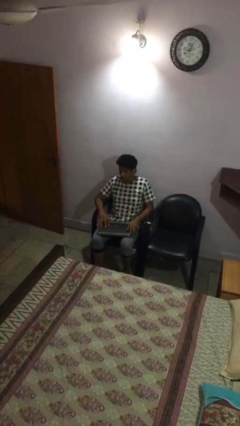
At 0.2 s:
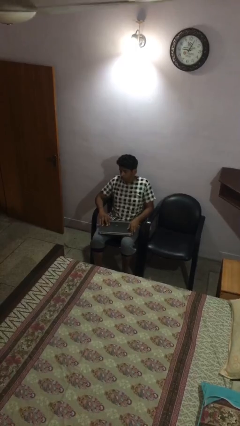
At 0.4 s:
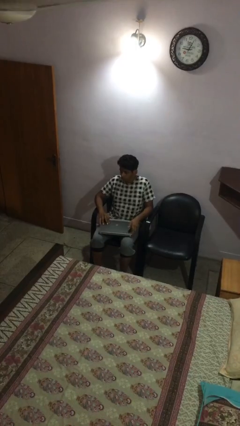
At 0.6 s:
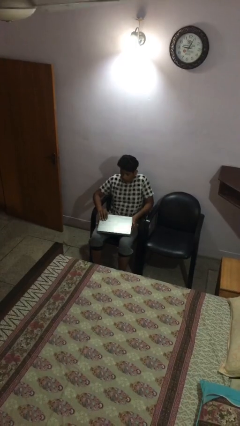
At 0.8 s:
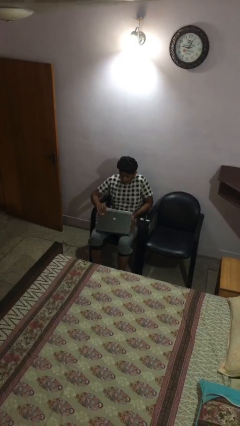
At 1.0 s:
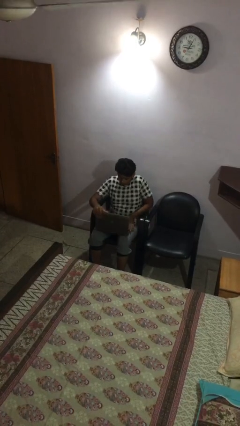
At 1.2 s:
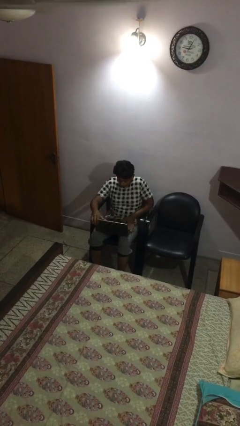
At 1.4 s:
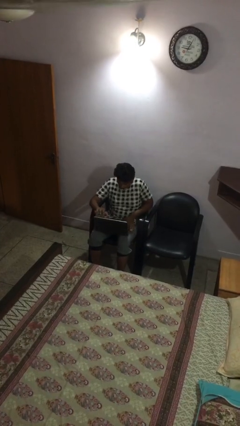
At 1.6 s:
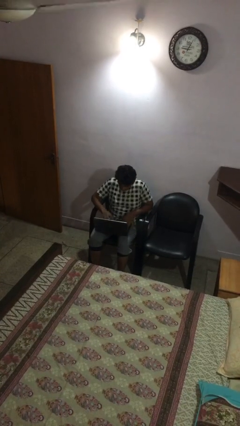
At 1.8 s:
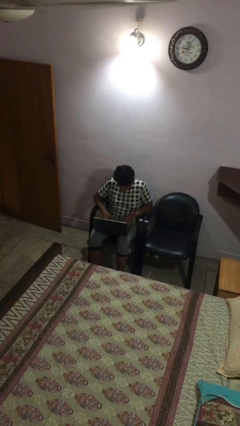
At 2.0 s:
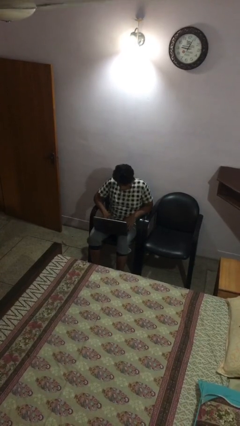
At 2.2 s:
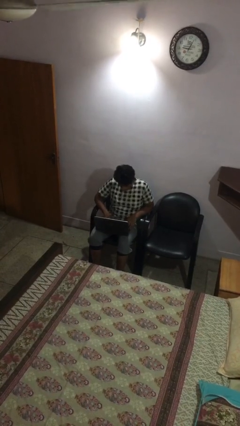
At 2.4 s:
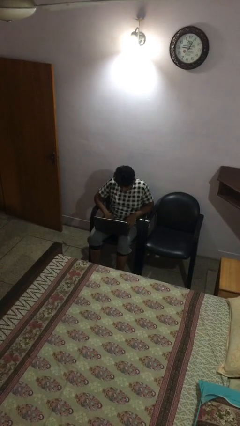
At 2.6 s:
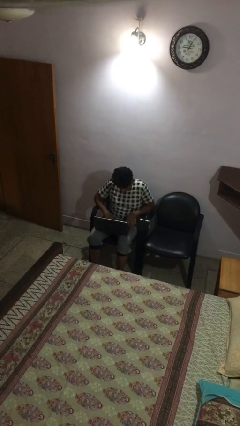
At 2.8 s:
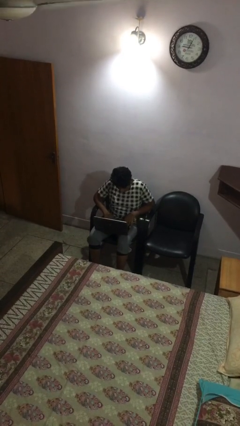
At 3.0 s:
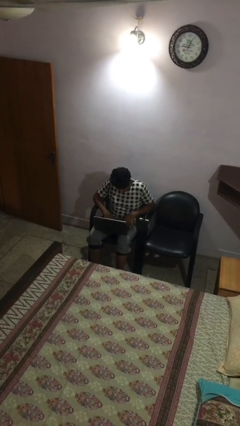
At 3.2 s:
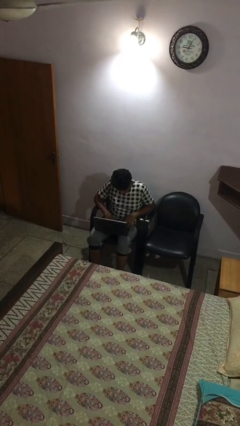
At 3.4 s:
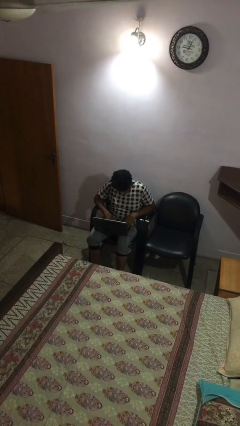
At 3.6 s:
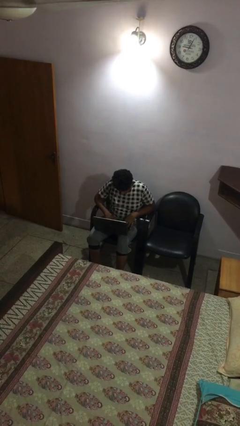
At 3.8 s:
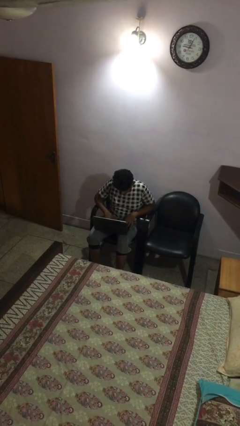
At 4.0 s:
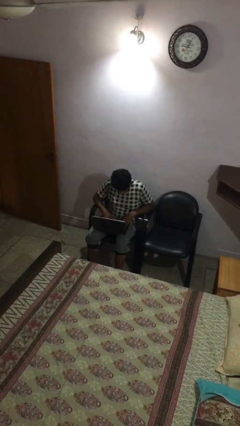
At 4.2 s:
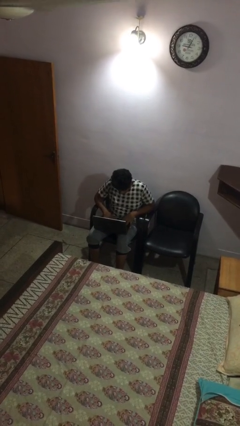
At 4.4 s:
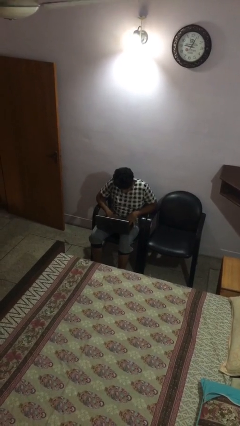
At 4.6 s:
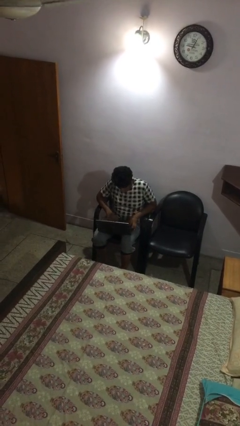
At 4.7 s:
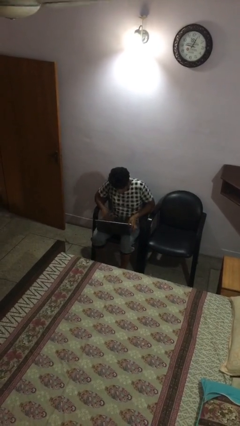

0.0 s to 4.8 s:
person interacts with laptop

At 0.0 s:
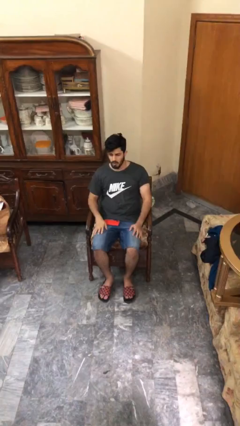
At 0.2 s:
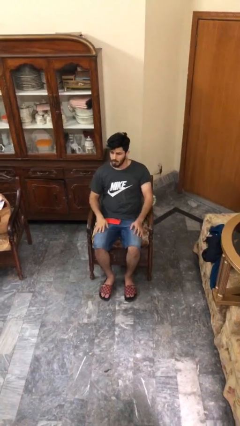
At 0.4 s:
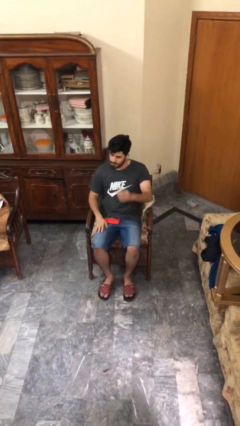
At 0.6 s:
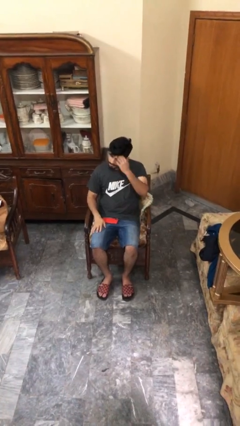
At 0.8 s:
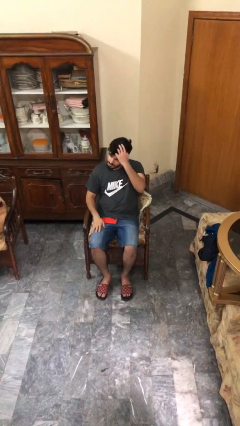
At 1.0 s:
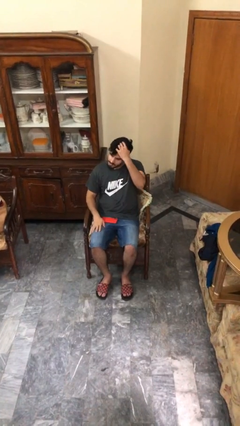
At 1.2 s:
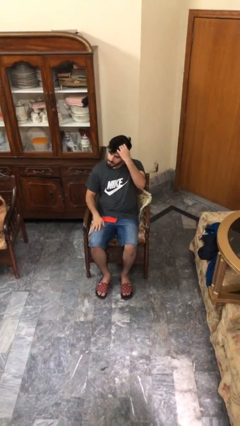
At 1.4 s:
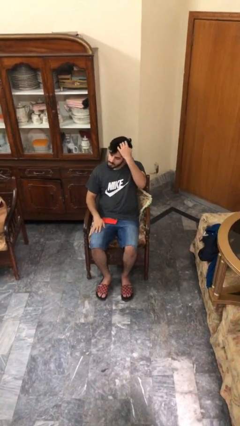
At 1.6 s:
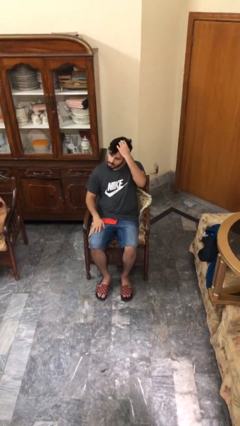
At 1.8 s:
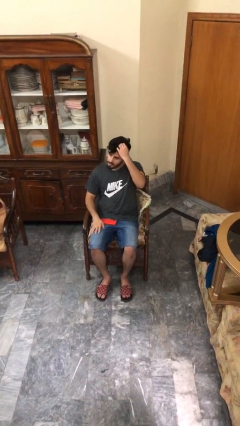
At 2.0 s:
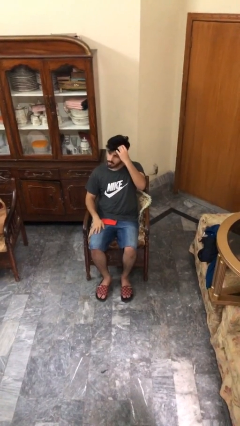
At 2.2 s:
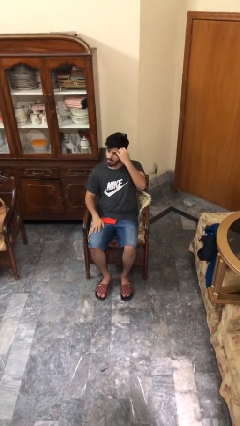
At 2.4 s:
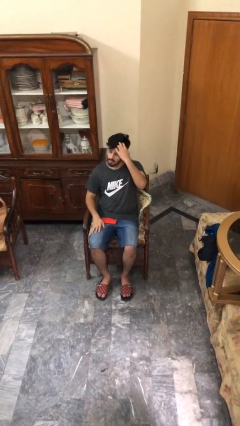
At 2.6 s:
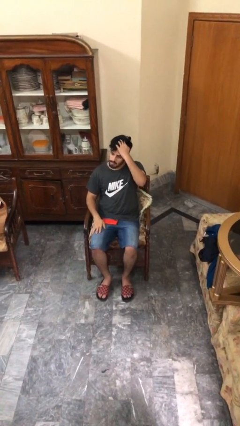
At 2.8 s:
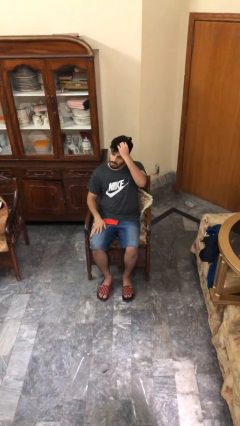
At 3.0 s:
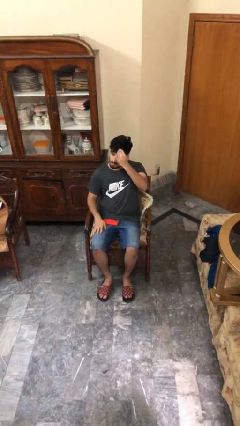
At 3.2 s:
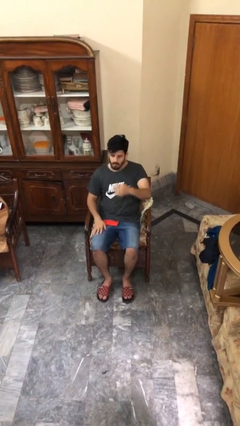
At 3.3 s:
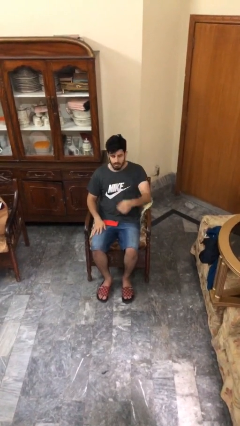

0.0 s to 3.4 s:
person strokes hair

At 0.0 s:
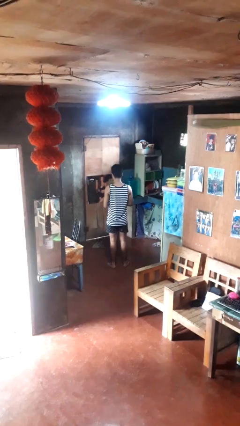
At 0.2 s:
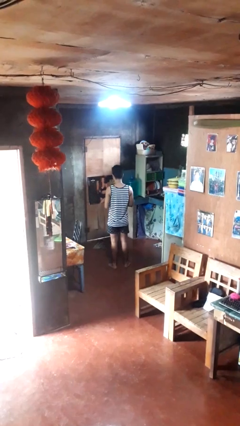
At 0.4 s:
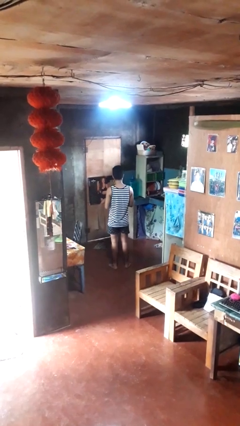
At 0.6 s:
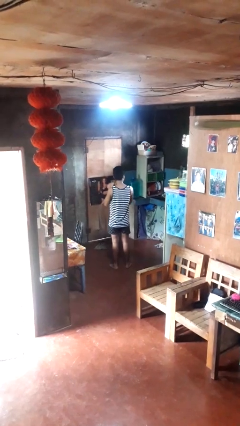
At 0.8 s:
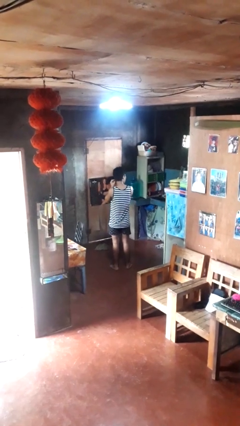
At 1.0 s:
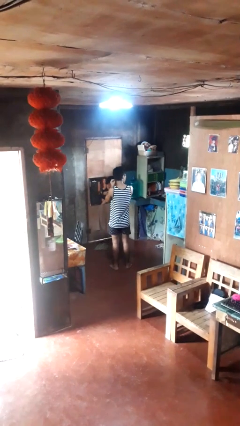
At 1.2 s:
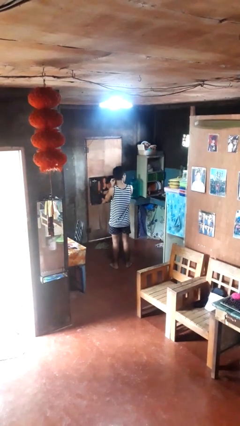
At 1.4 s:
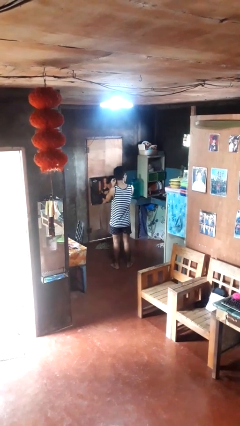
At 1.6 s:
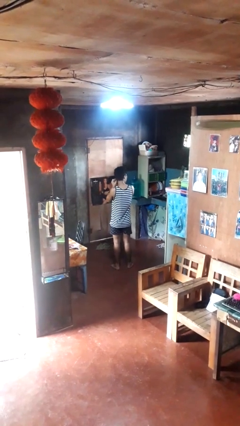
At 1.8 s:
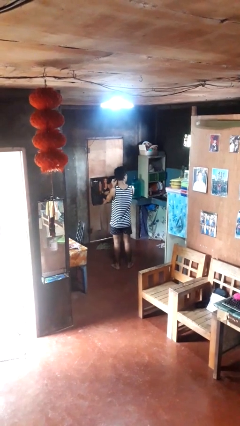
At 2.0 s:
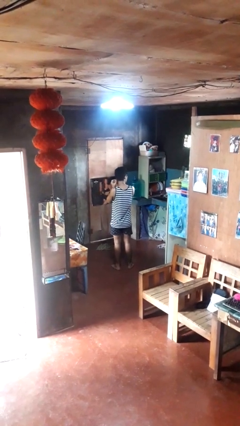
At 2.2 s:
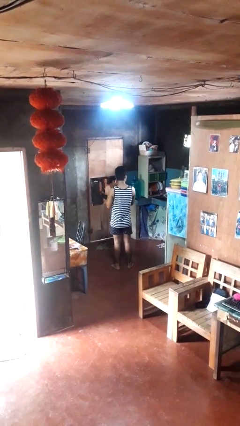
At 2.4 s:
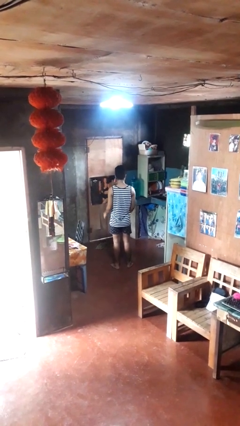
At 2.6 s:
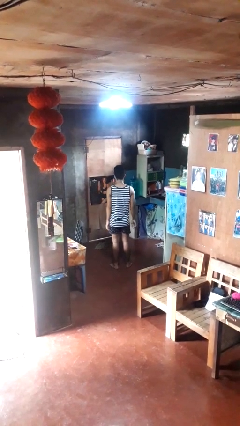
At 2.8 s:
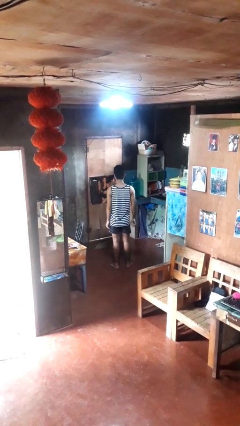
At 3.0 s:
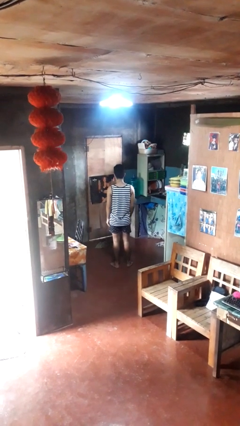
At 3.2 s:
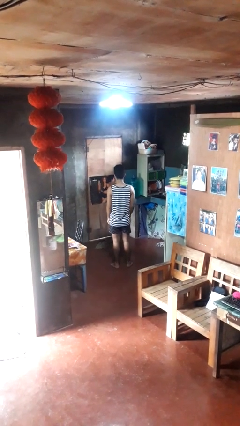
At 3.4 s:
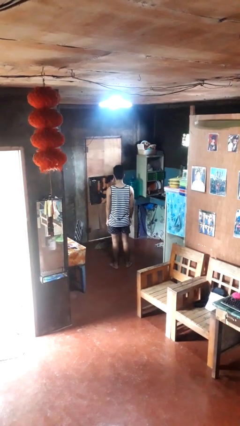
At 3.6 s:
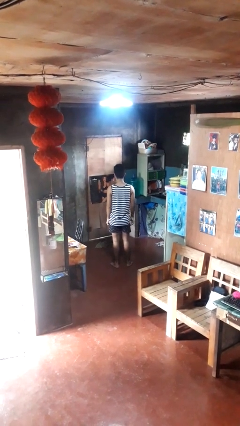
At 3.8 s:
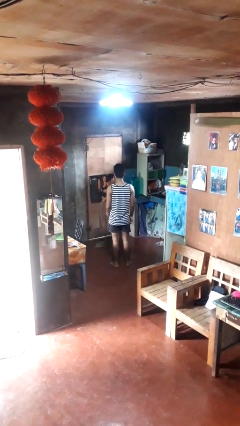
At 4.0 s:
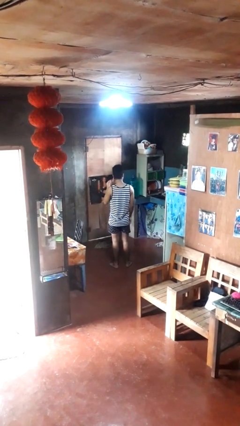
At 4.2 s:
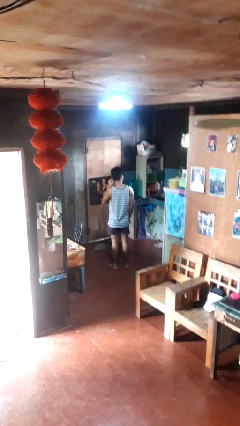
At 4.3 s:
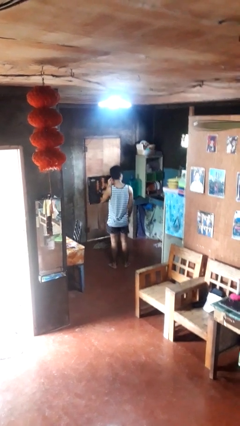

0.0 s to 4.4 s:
person puts on earrings

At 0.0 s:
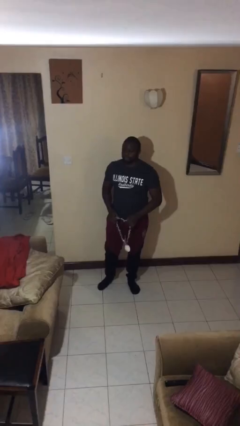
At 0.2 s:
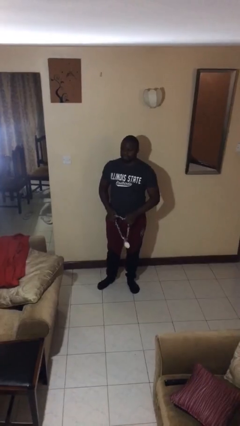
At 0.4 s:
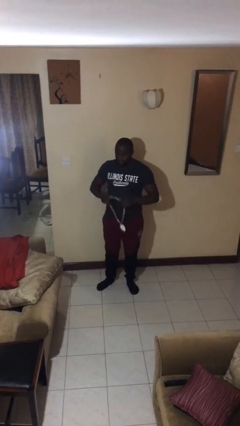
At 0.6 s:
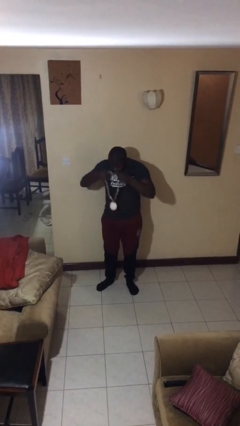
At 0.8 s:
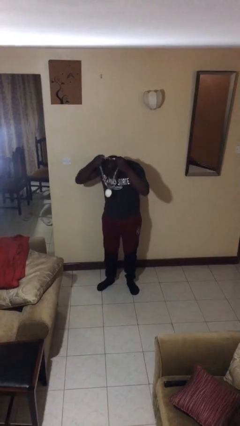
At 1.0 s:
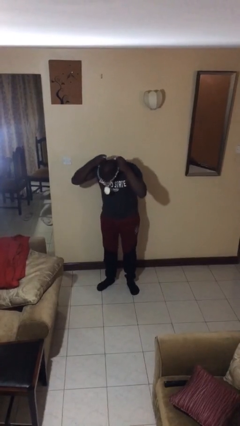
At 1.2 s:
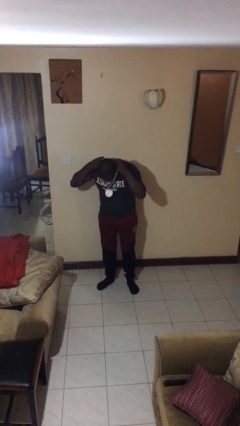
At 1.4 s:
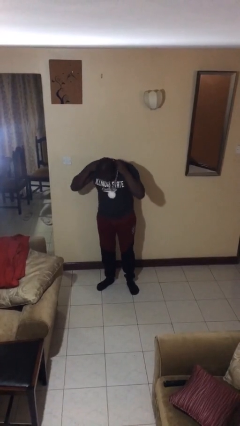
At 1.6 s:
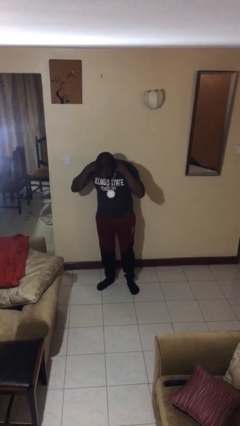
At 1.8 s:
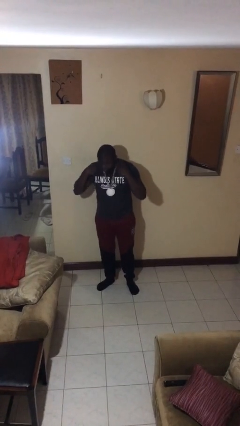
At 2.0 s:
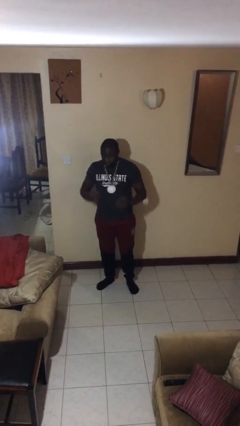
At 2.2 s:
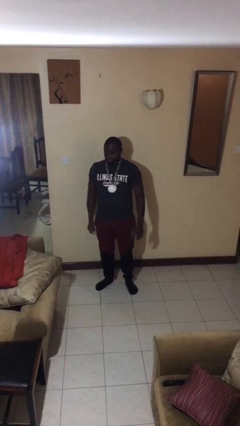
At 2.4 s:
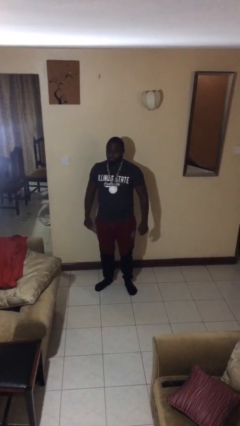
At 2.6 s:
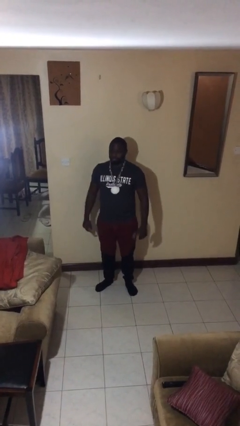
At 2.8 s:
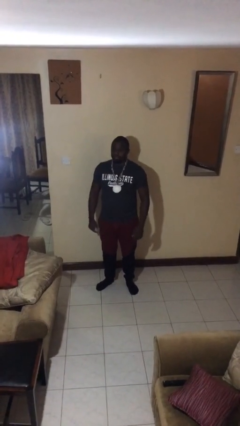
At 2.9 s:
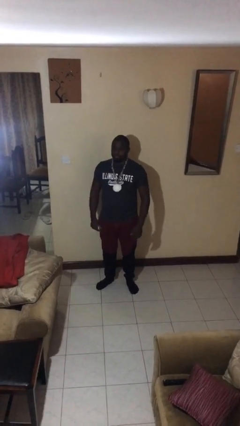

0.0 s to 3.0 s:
person puts on necklace

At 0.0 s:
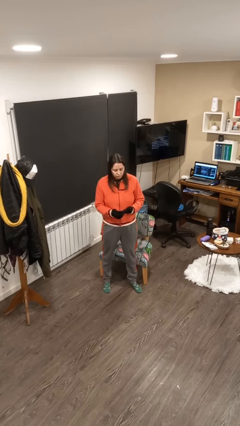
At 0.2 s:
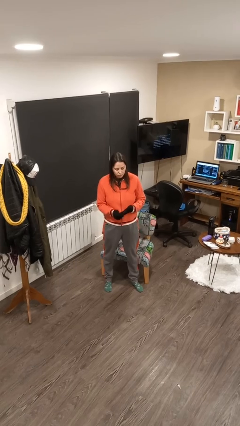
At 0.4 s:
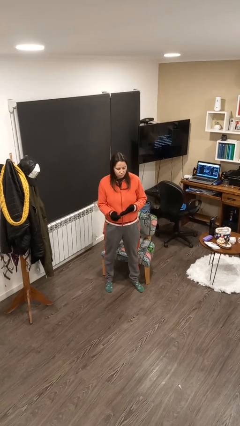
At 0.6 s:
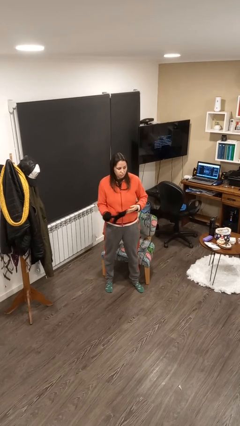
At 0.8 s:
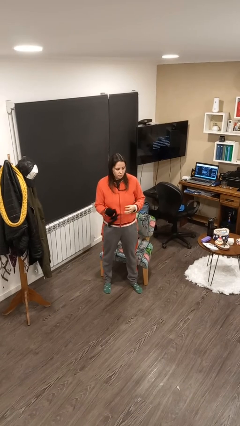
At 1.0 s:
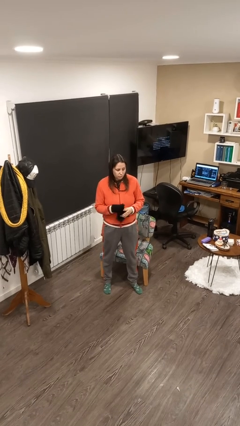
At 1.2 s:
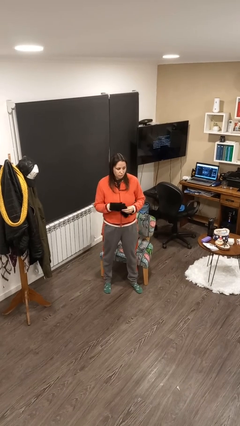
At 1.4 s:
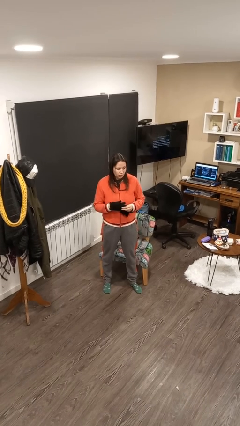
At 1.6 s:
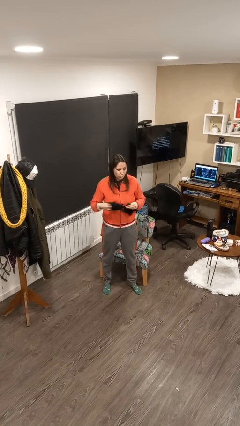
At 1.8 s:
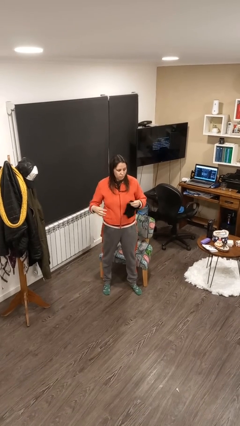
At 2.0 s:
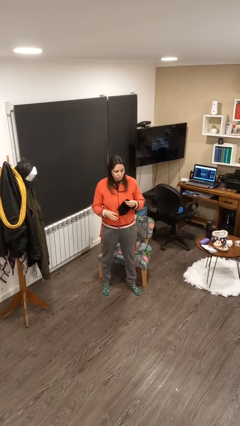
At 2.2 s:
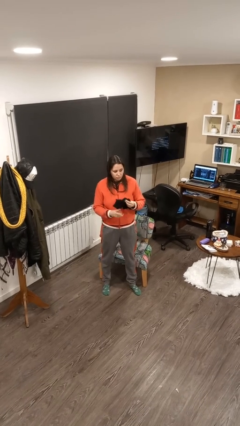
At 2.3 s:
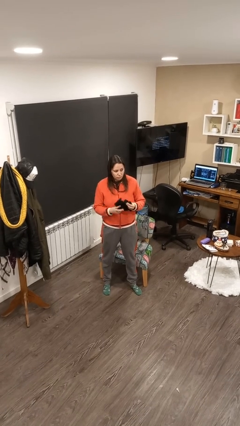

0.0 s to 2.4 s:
person takes off gloves
